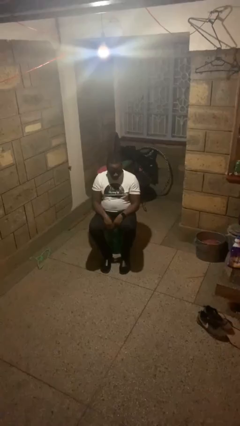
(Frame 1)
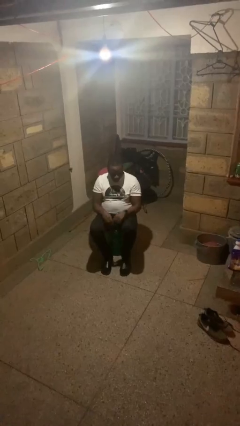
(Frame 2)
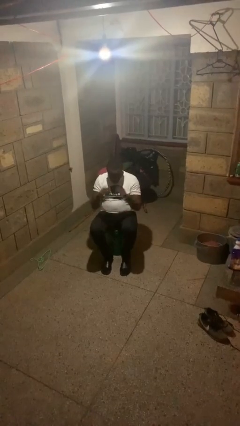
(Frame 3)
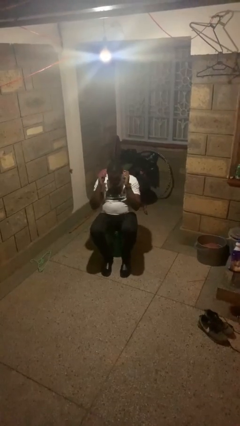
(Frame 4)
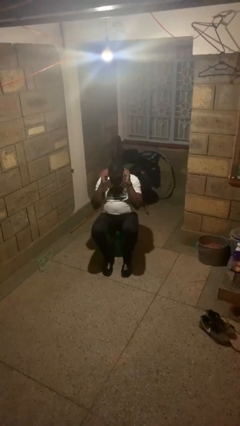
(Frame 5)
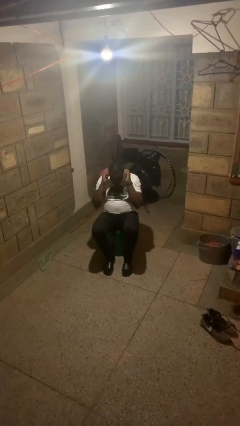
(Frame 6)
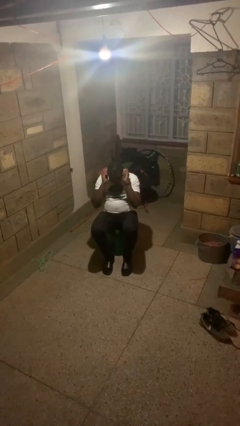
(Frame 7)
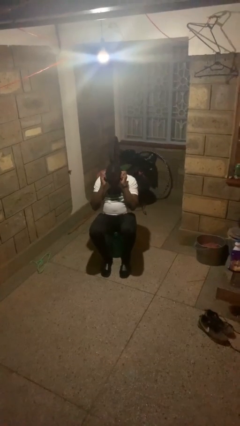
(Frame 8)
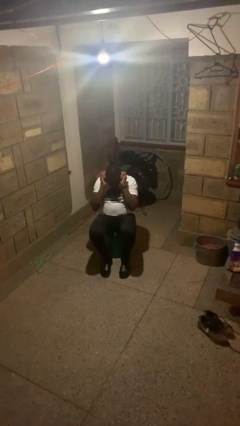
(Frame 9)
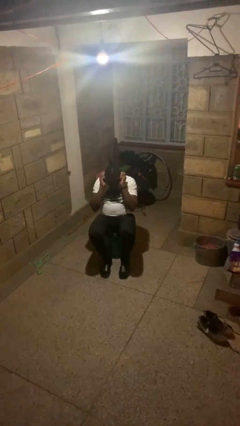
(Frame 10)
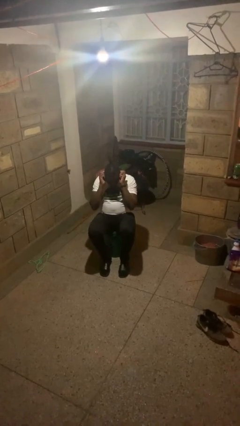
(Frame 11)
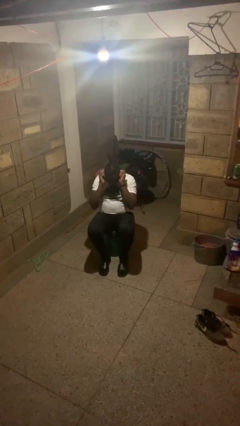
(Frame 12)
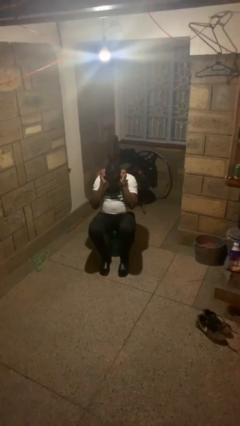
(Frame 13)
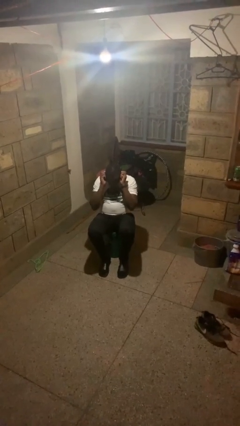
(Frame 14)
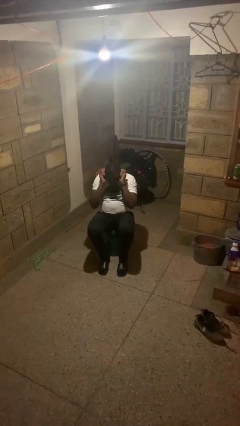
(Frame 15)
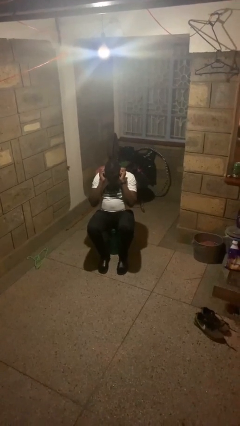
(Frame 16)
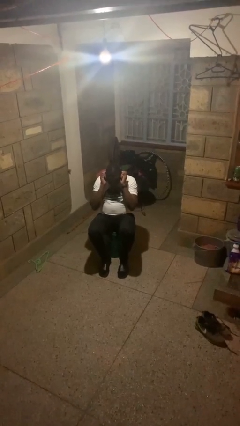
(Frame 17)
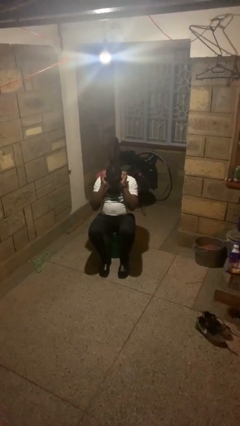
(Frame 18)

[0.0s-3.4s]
person touches earlobe

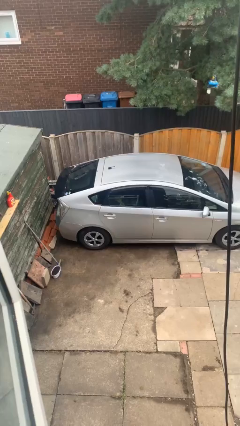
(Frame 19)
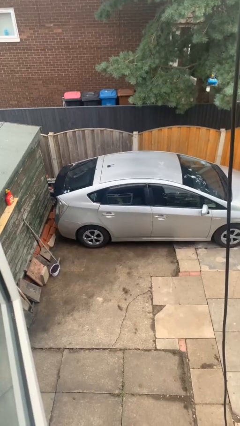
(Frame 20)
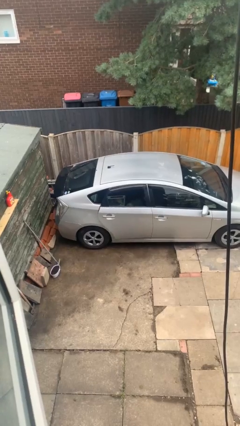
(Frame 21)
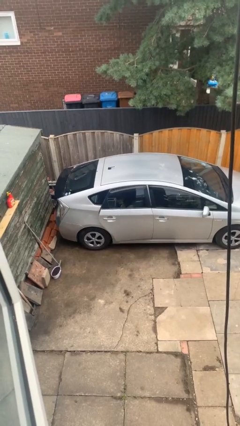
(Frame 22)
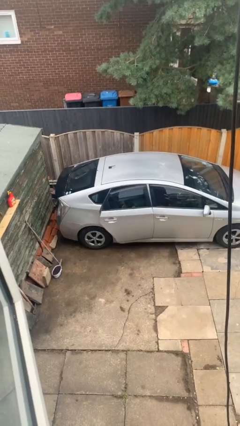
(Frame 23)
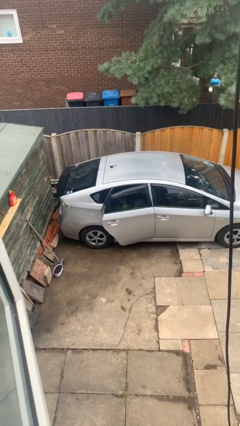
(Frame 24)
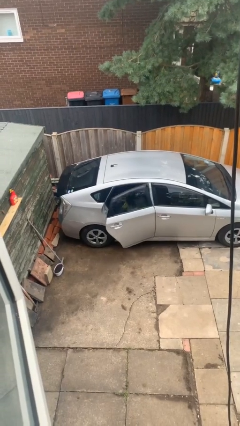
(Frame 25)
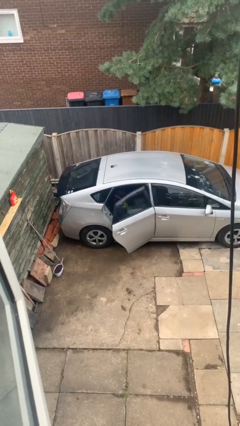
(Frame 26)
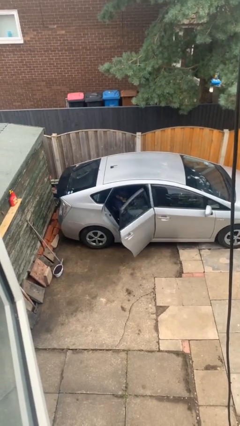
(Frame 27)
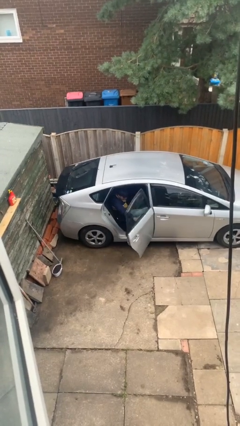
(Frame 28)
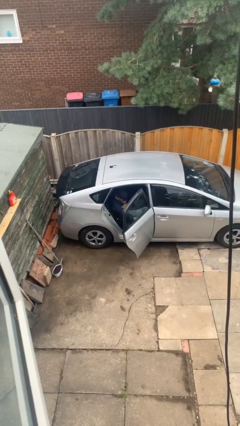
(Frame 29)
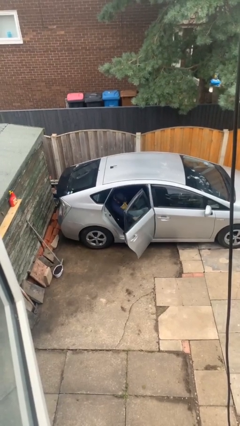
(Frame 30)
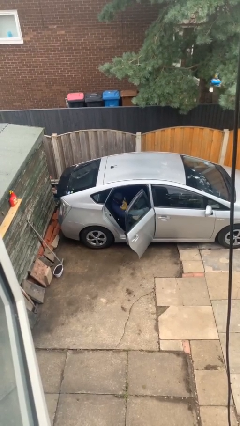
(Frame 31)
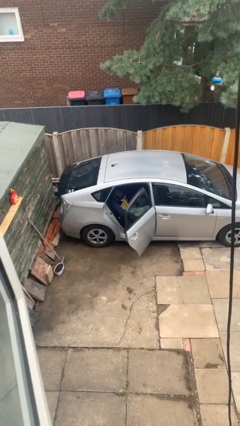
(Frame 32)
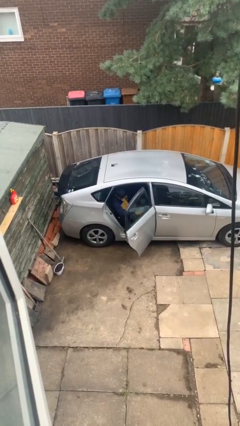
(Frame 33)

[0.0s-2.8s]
person opens car door

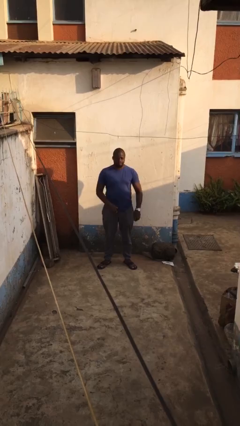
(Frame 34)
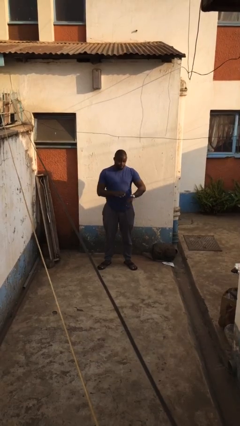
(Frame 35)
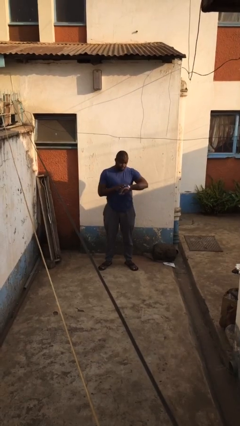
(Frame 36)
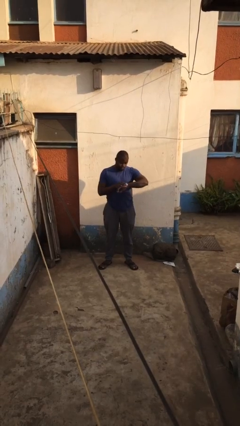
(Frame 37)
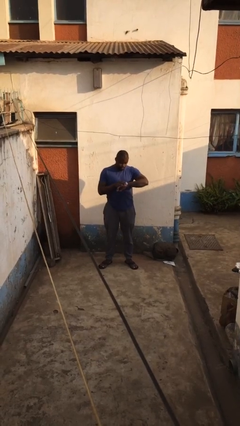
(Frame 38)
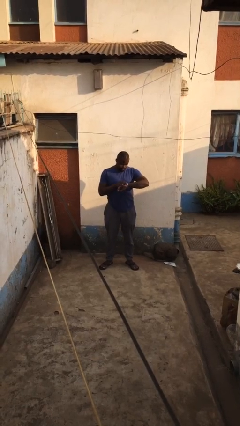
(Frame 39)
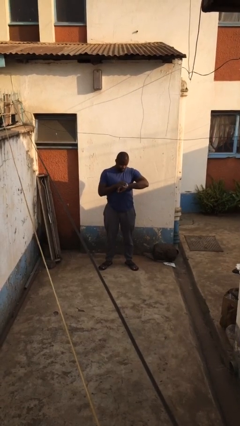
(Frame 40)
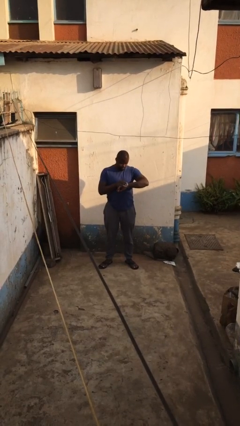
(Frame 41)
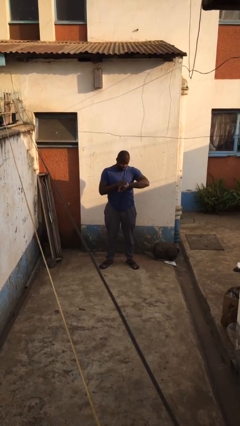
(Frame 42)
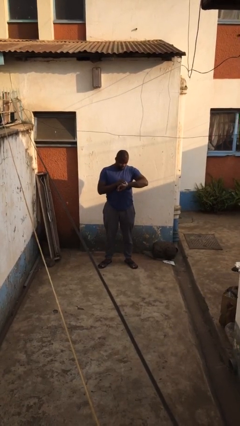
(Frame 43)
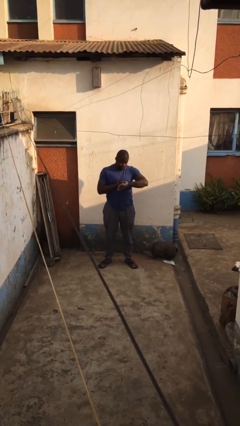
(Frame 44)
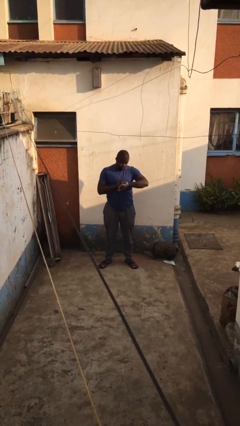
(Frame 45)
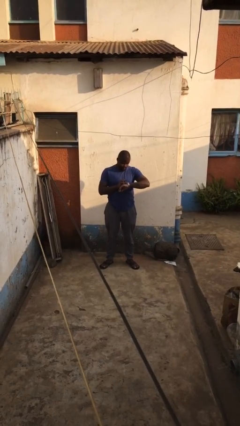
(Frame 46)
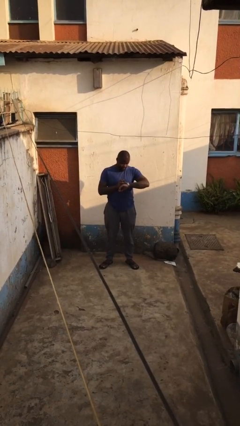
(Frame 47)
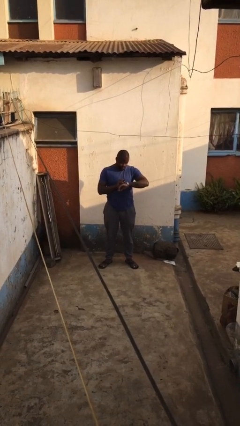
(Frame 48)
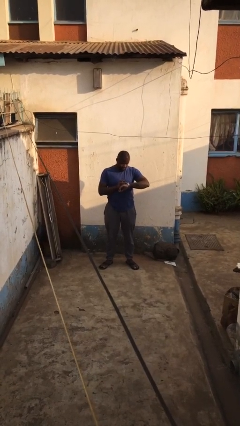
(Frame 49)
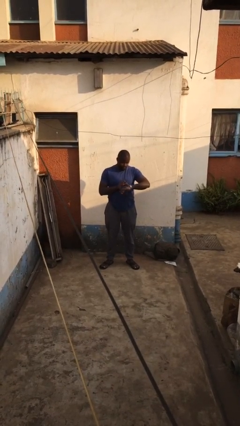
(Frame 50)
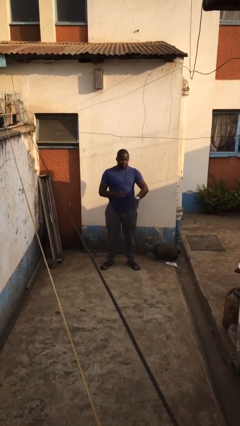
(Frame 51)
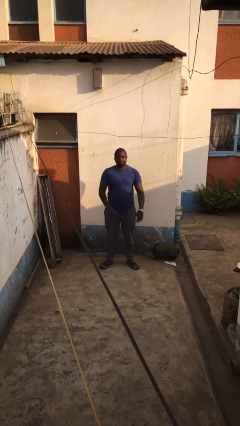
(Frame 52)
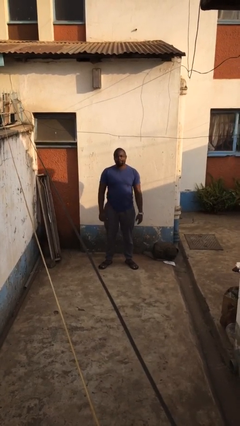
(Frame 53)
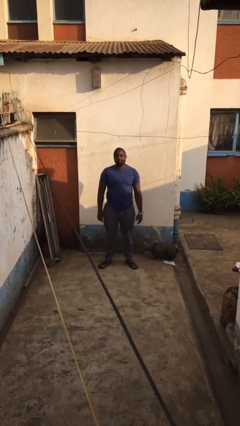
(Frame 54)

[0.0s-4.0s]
person looks at wristwatch

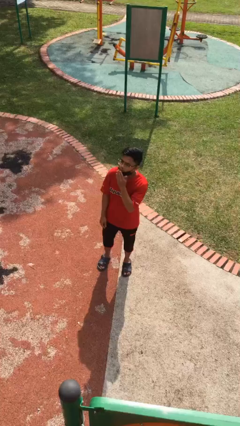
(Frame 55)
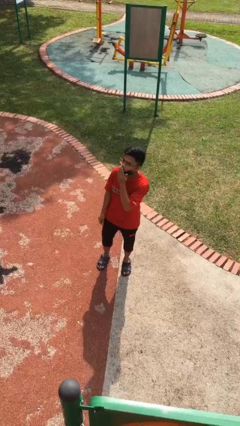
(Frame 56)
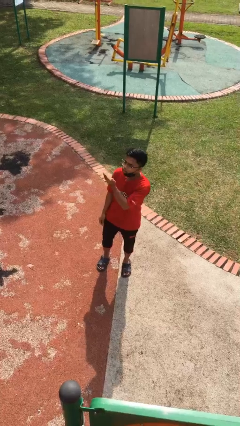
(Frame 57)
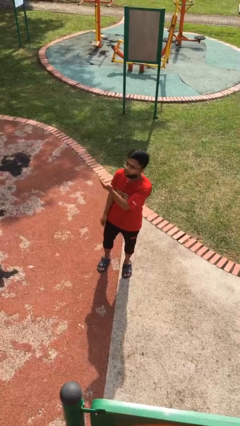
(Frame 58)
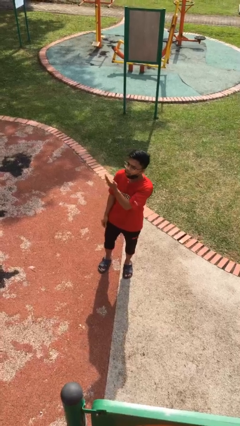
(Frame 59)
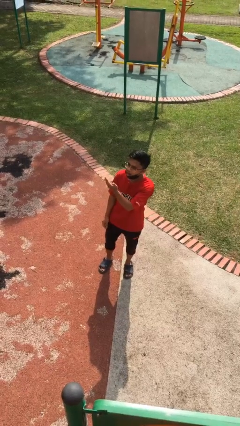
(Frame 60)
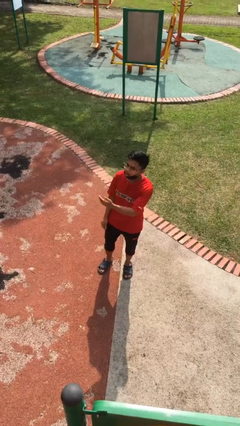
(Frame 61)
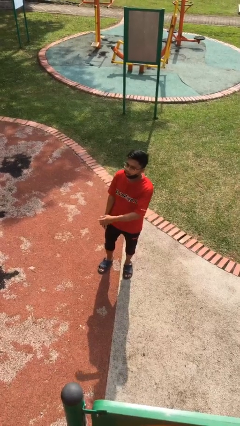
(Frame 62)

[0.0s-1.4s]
person gestures blow kiss

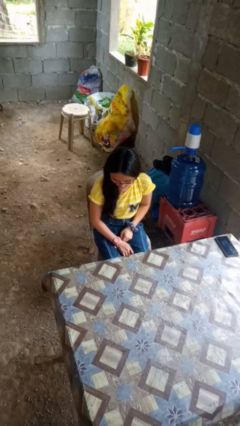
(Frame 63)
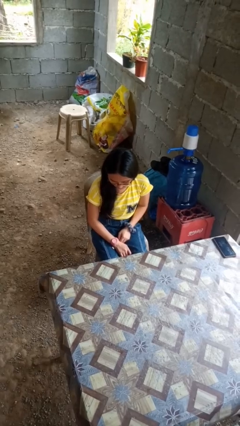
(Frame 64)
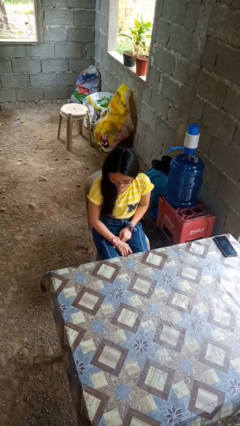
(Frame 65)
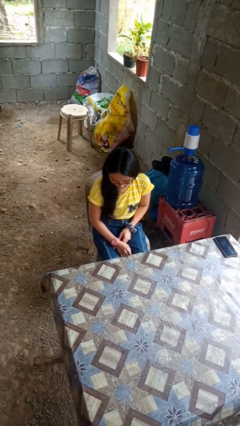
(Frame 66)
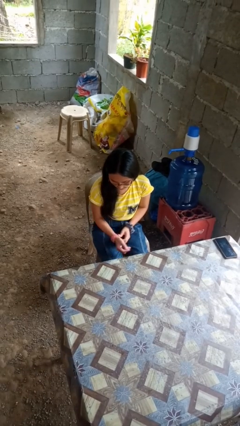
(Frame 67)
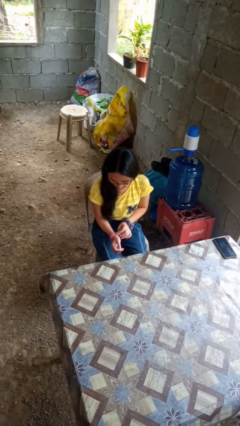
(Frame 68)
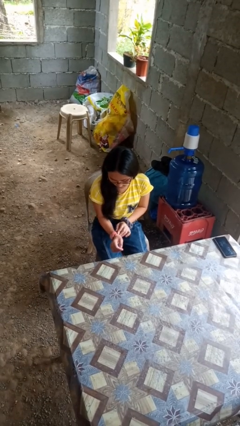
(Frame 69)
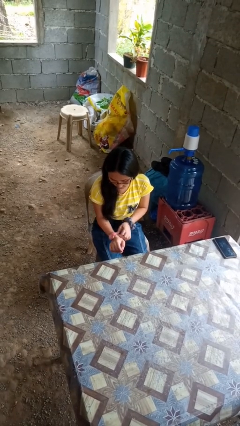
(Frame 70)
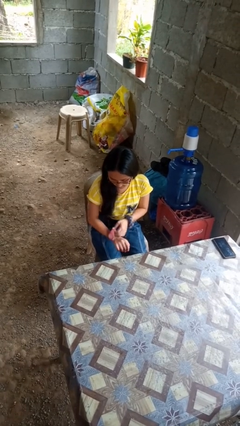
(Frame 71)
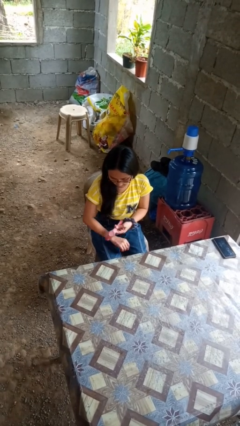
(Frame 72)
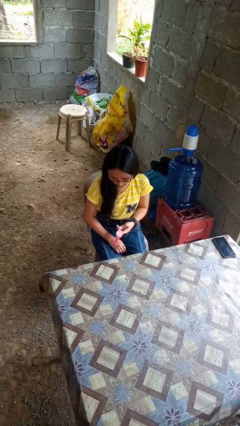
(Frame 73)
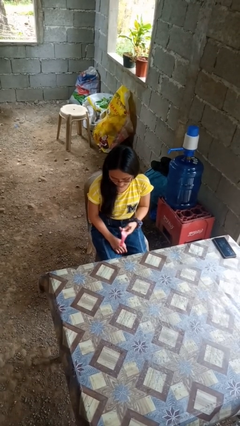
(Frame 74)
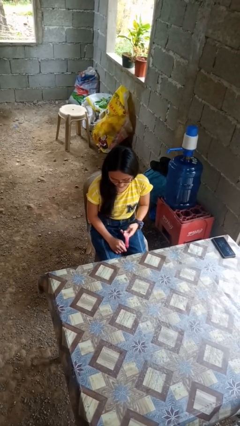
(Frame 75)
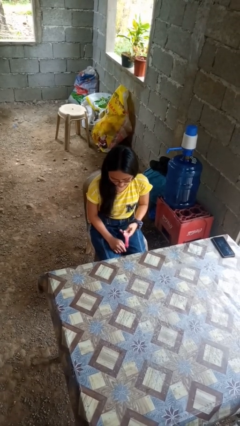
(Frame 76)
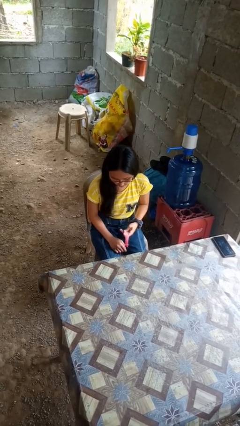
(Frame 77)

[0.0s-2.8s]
person takes off wristwatch

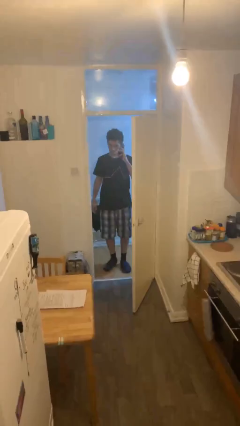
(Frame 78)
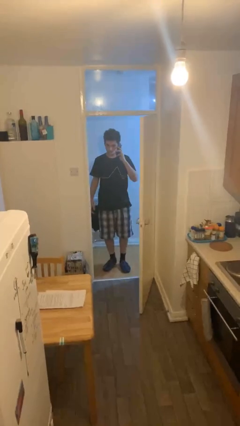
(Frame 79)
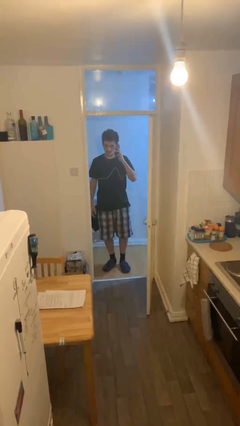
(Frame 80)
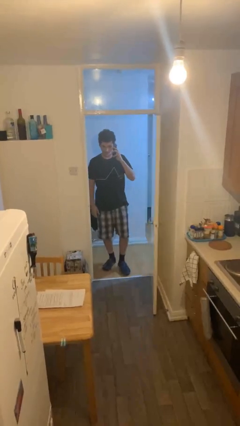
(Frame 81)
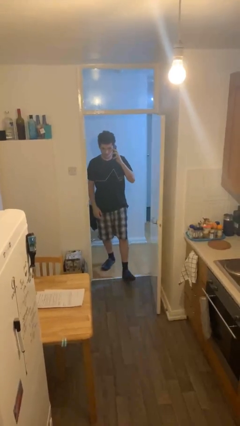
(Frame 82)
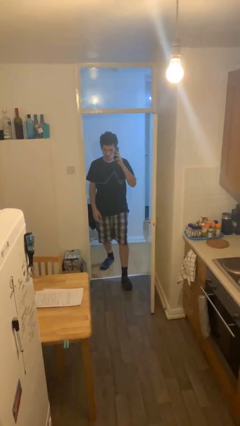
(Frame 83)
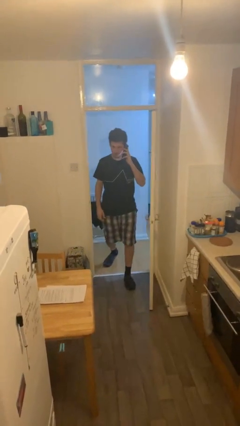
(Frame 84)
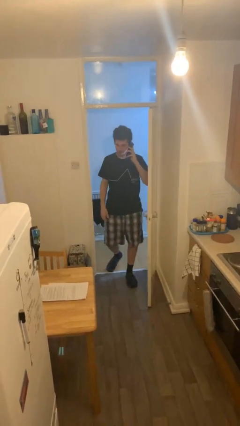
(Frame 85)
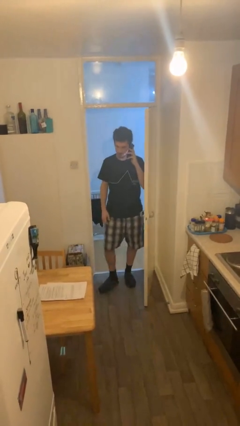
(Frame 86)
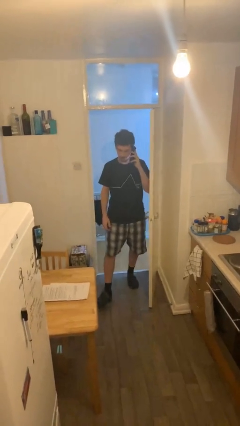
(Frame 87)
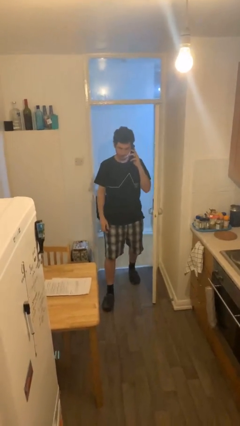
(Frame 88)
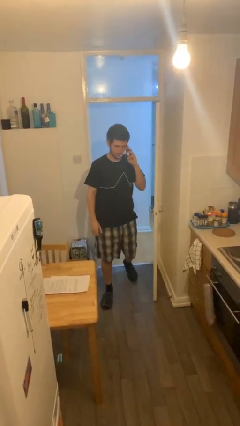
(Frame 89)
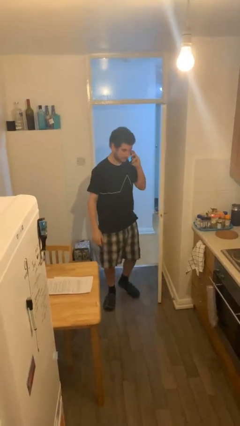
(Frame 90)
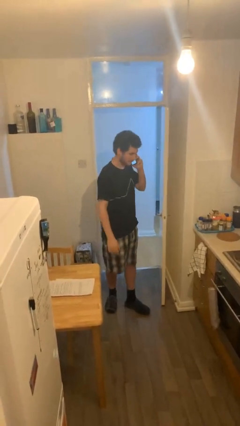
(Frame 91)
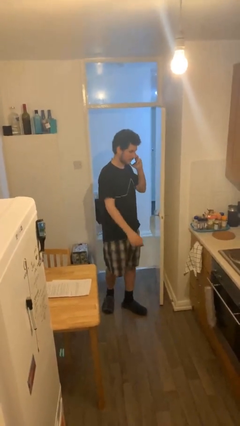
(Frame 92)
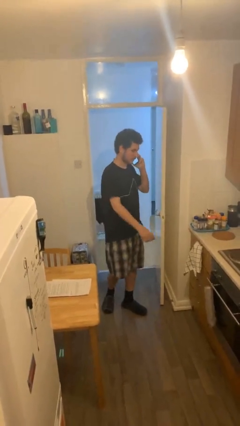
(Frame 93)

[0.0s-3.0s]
person enters scene through structure
